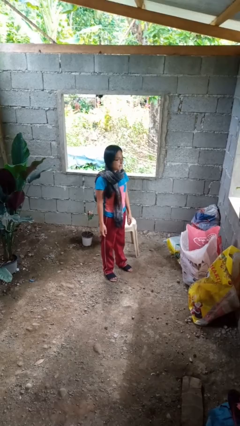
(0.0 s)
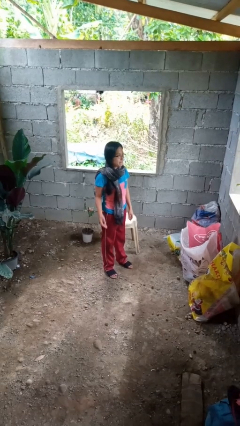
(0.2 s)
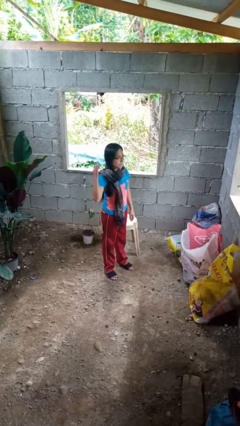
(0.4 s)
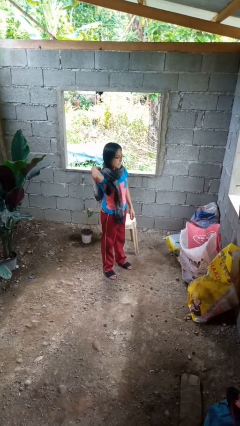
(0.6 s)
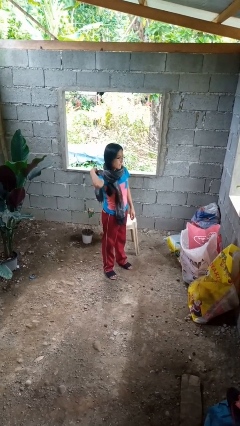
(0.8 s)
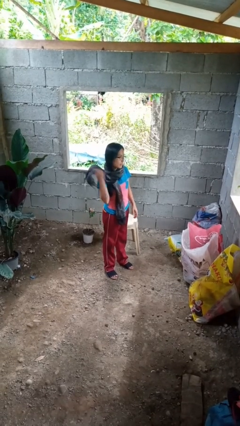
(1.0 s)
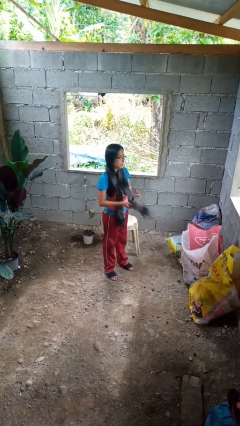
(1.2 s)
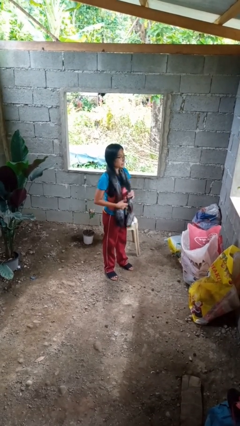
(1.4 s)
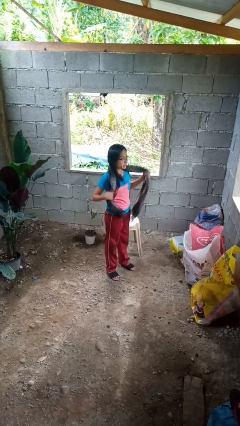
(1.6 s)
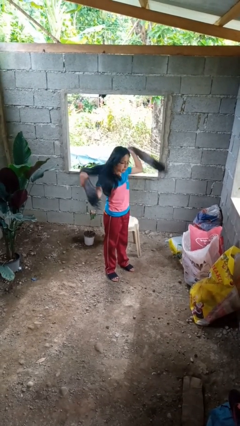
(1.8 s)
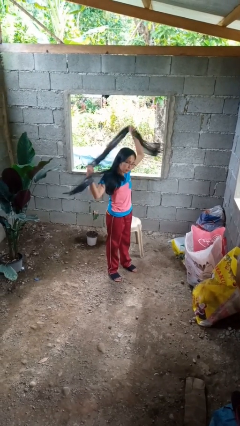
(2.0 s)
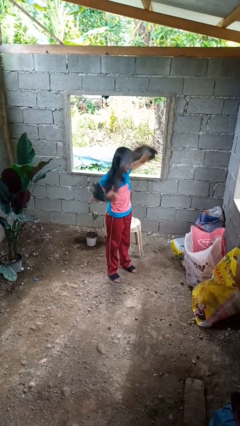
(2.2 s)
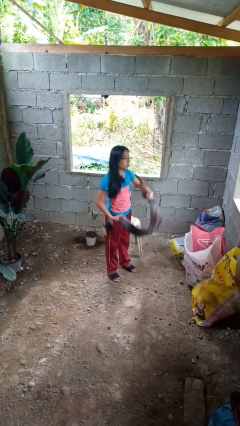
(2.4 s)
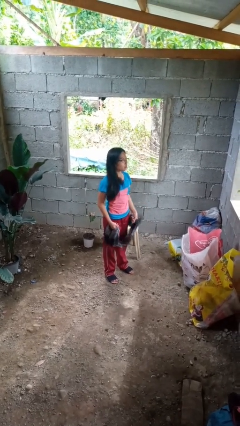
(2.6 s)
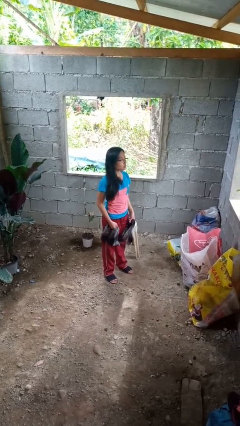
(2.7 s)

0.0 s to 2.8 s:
person takes off scarf

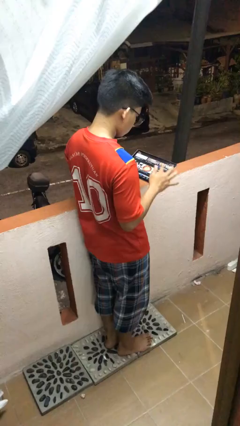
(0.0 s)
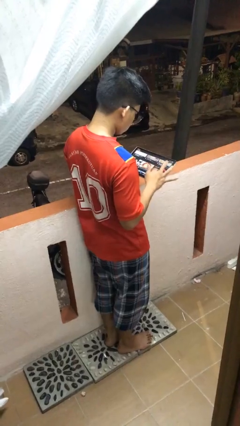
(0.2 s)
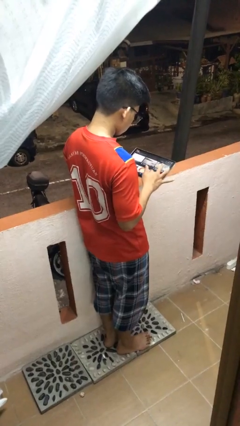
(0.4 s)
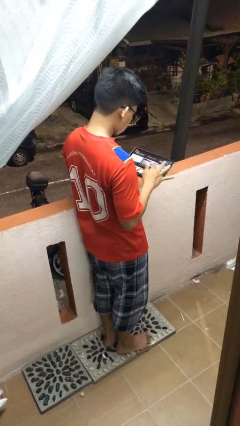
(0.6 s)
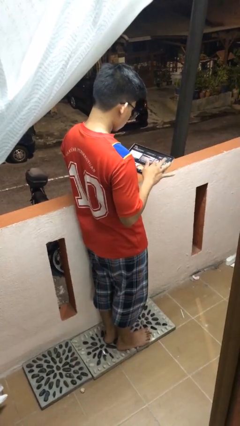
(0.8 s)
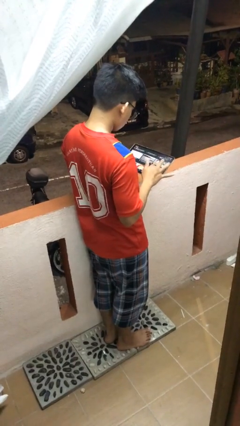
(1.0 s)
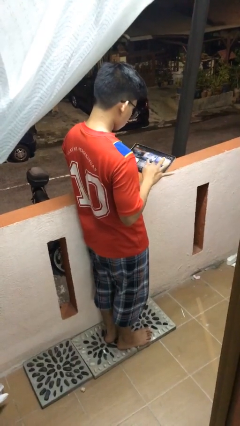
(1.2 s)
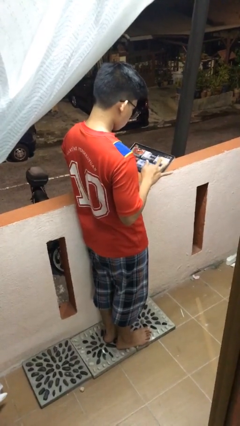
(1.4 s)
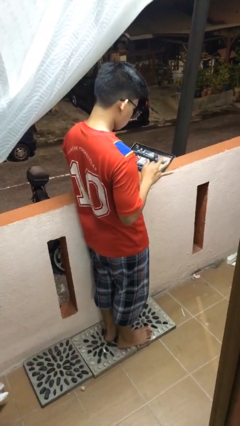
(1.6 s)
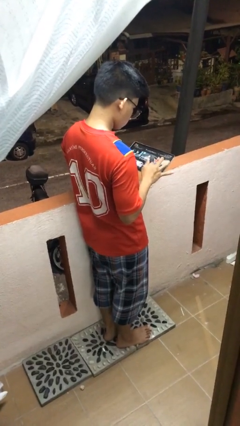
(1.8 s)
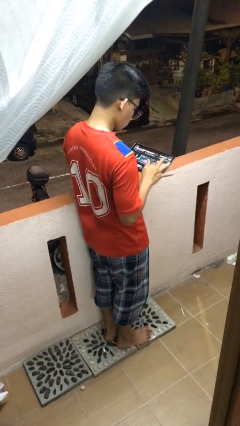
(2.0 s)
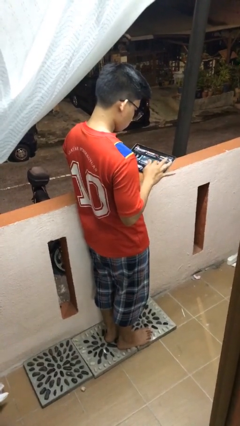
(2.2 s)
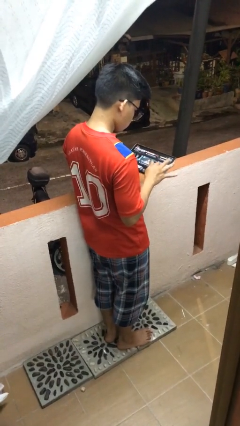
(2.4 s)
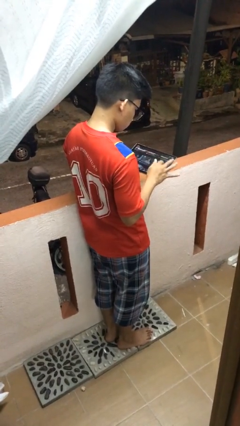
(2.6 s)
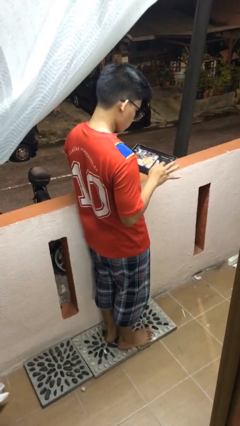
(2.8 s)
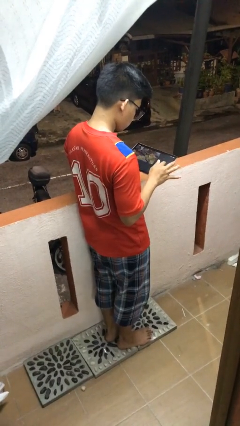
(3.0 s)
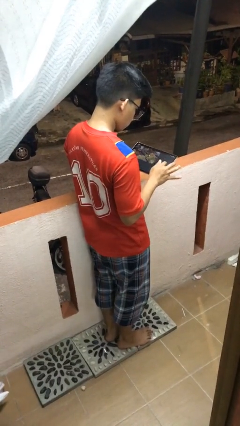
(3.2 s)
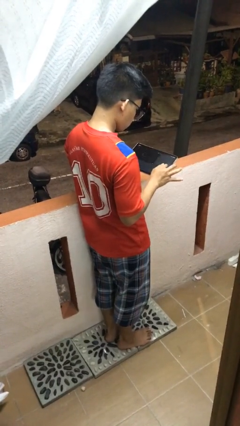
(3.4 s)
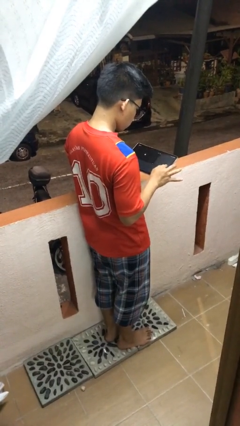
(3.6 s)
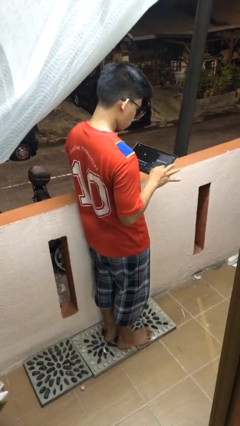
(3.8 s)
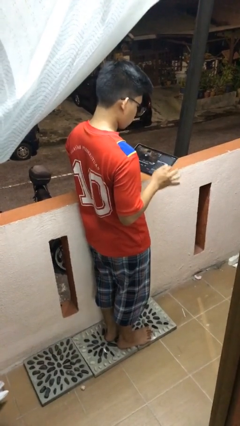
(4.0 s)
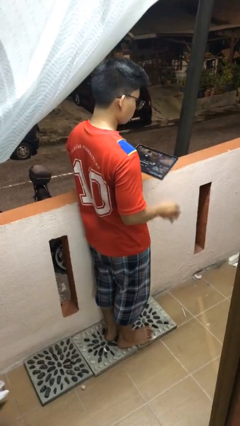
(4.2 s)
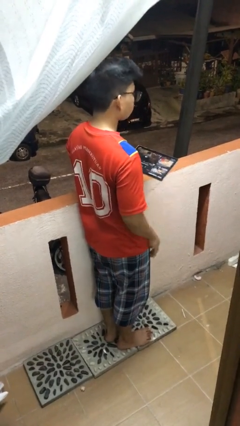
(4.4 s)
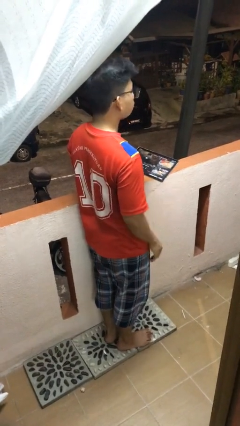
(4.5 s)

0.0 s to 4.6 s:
person interacts with tablet

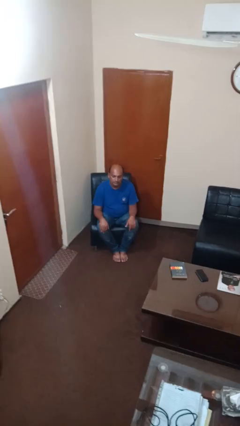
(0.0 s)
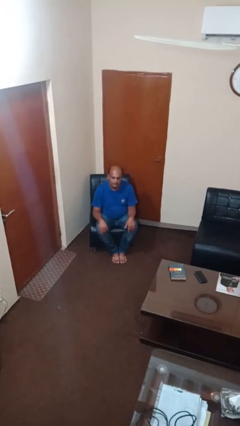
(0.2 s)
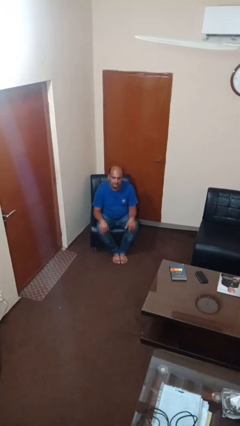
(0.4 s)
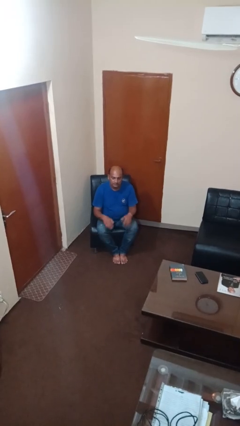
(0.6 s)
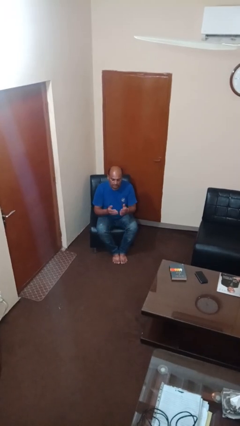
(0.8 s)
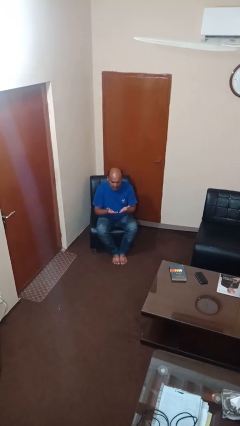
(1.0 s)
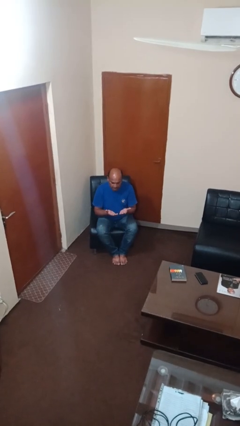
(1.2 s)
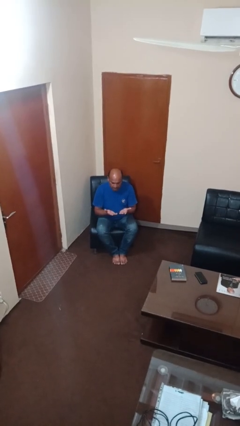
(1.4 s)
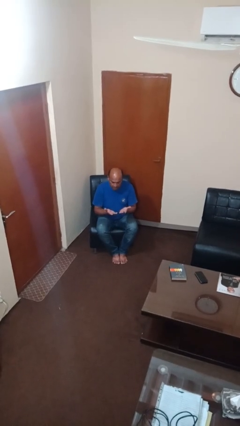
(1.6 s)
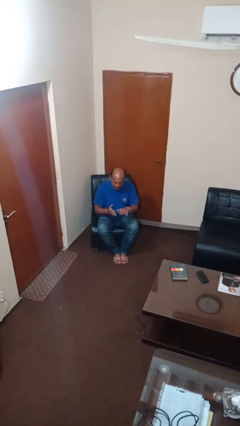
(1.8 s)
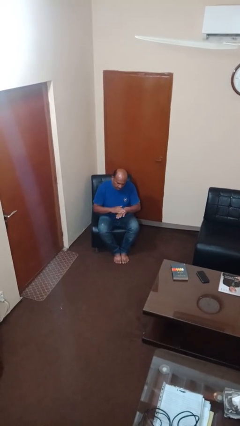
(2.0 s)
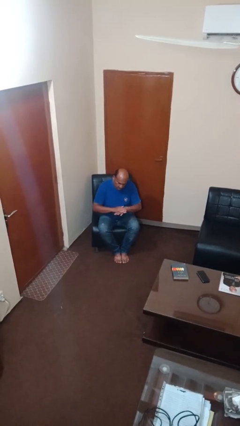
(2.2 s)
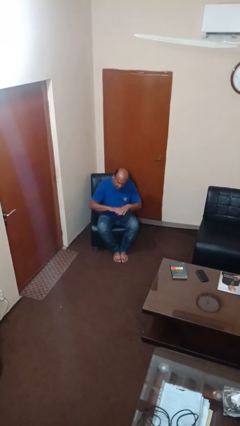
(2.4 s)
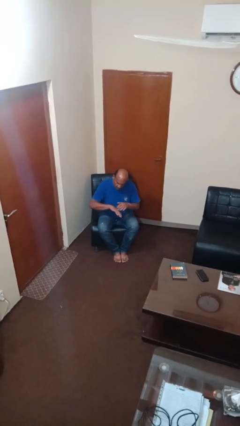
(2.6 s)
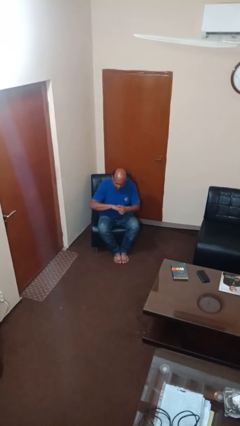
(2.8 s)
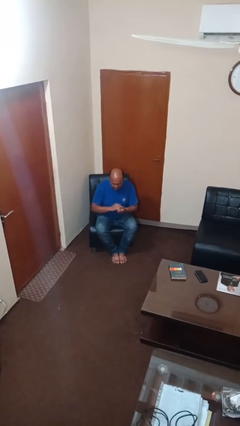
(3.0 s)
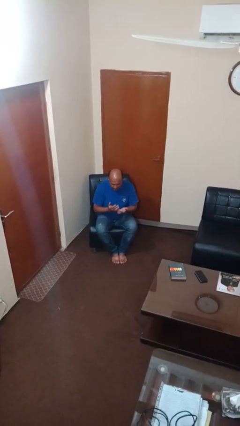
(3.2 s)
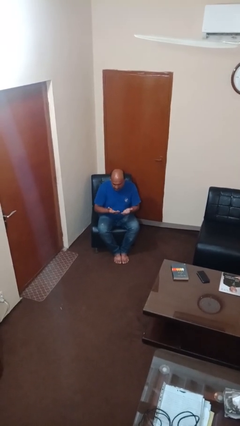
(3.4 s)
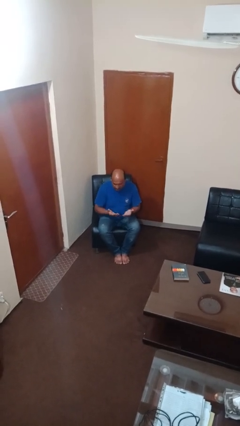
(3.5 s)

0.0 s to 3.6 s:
person looks at hands in lap
